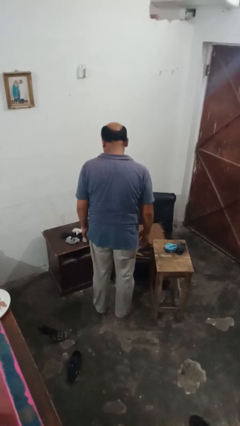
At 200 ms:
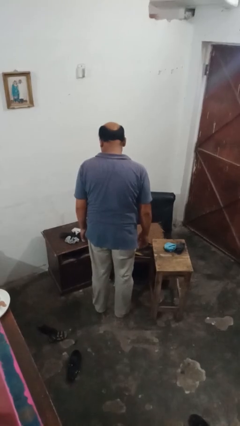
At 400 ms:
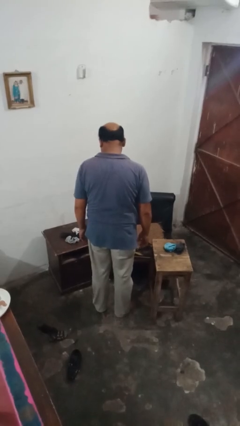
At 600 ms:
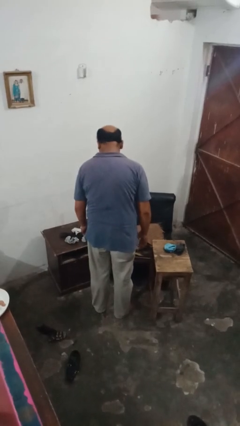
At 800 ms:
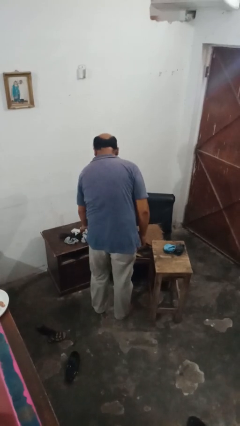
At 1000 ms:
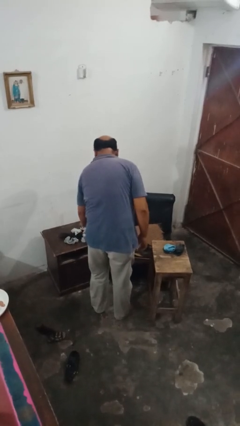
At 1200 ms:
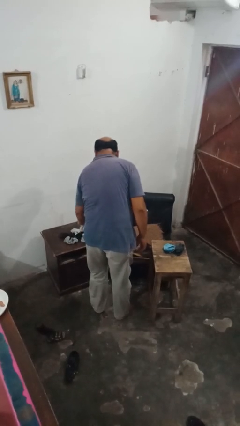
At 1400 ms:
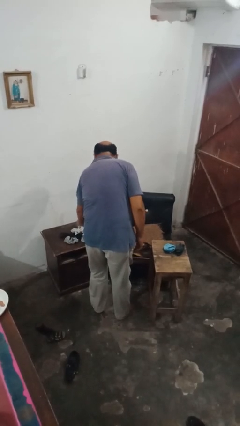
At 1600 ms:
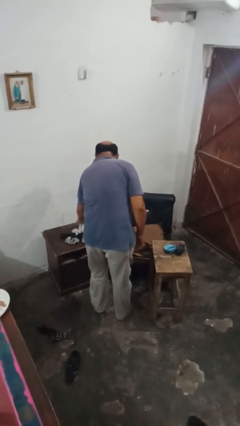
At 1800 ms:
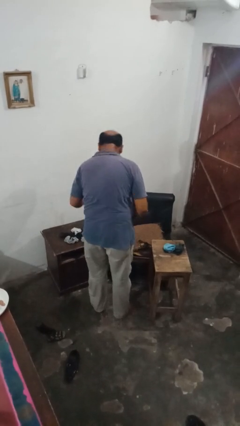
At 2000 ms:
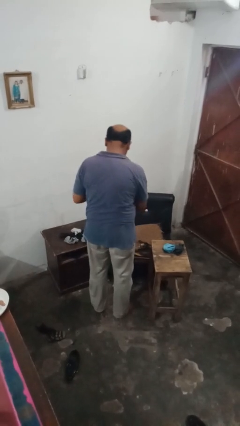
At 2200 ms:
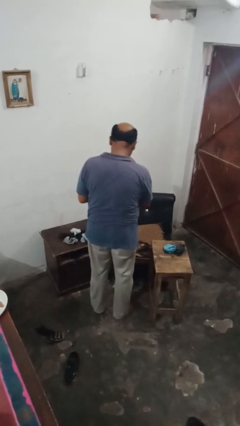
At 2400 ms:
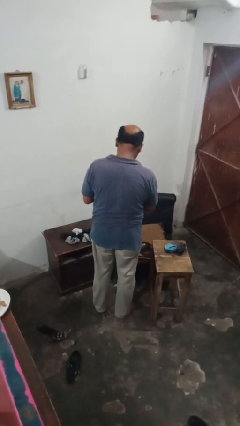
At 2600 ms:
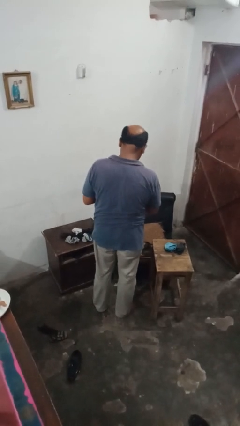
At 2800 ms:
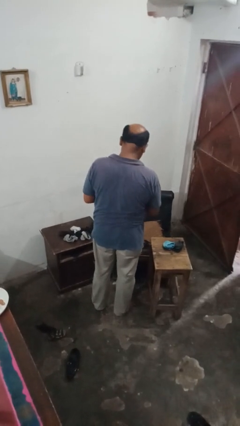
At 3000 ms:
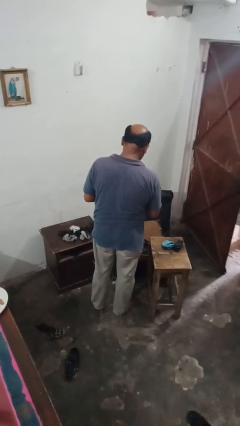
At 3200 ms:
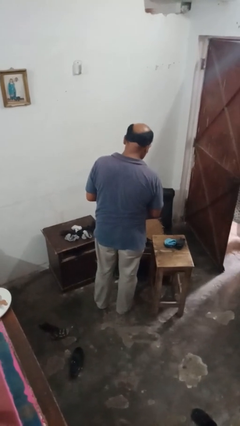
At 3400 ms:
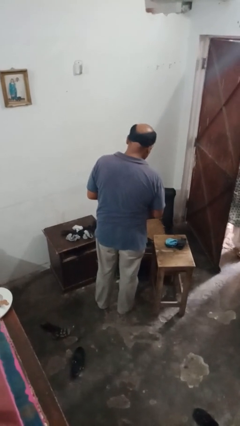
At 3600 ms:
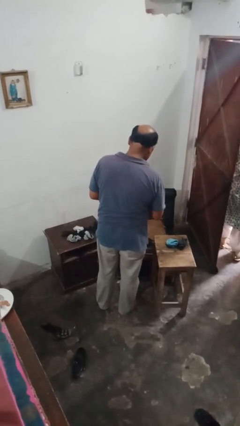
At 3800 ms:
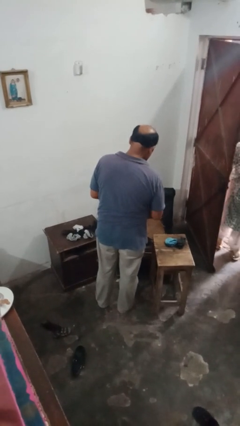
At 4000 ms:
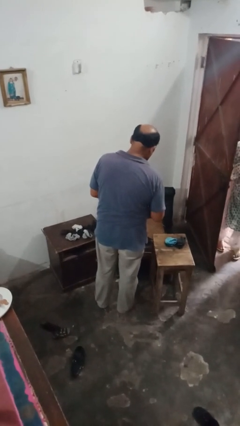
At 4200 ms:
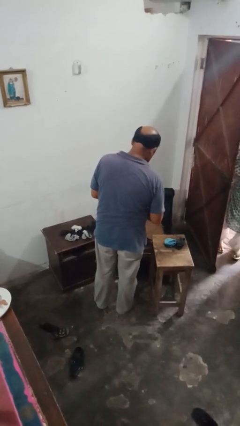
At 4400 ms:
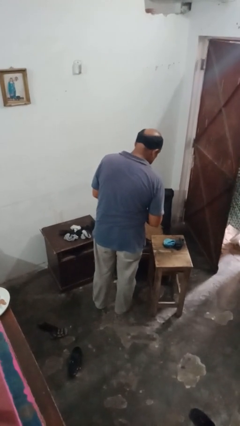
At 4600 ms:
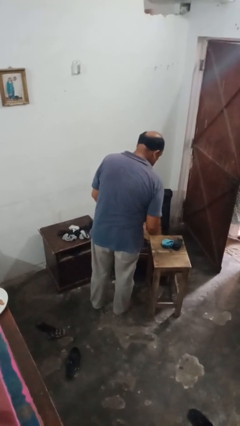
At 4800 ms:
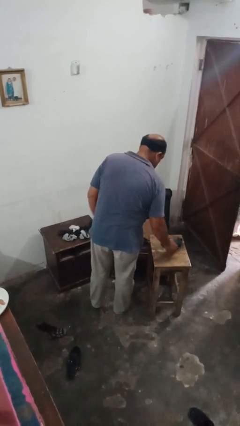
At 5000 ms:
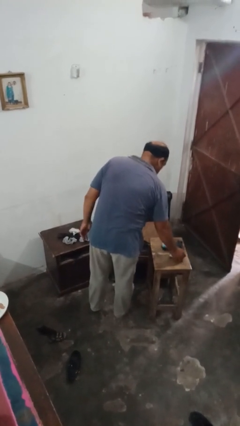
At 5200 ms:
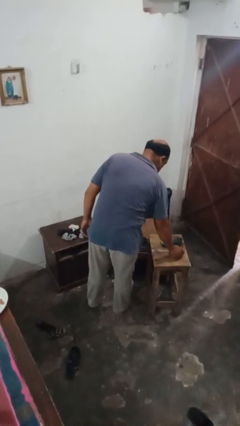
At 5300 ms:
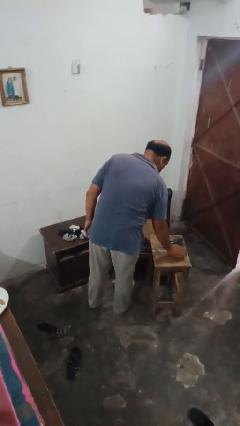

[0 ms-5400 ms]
person folds socks

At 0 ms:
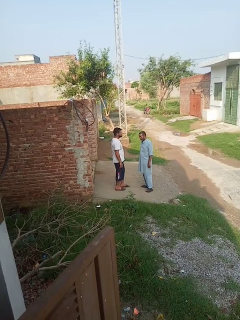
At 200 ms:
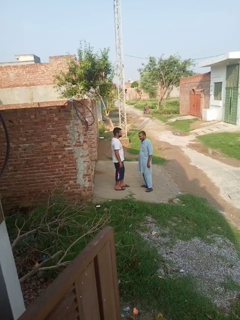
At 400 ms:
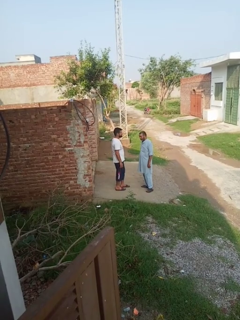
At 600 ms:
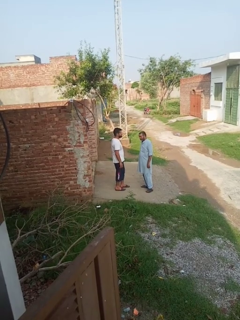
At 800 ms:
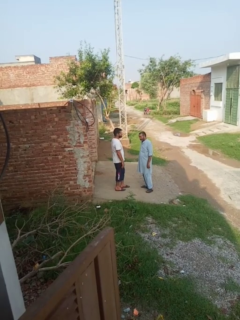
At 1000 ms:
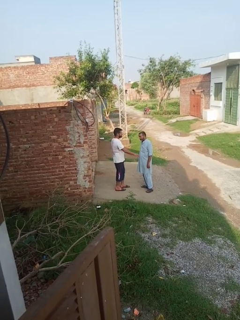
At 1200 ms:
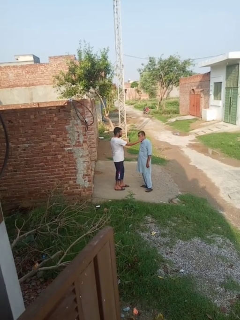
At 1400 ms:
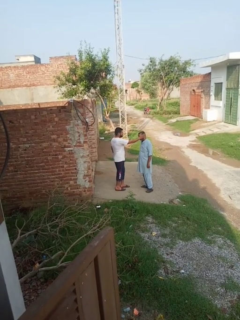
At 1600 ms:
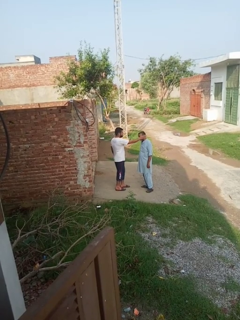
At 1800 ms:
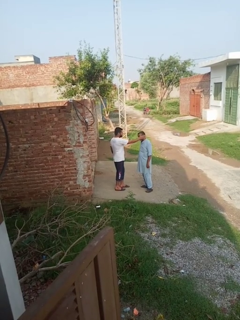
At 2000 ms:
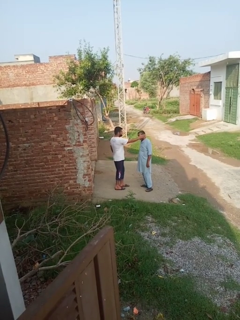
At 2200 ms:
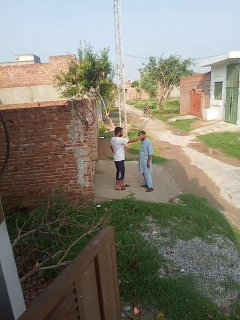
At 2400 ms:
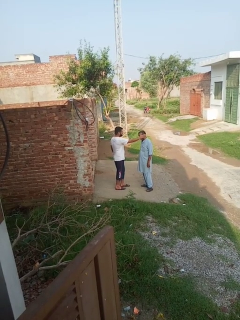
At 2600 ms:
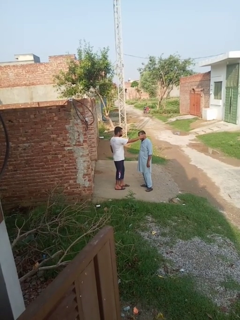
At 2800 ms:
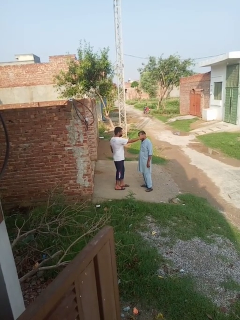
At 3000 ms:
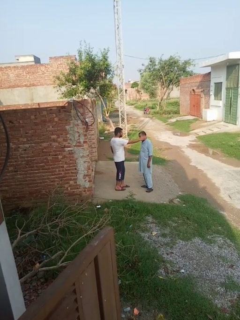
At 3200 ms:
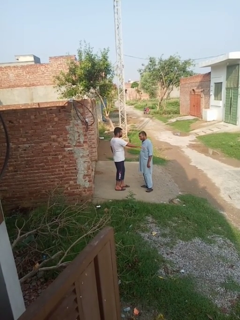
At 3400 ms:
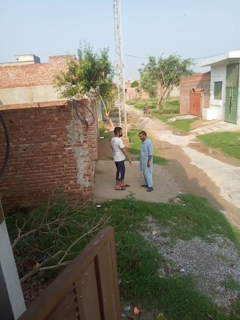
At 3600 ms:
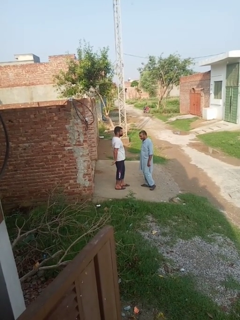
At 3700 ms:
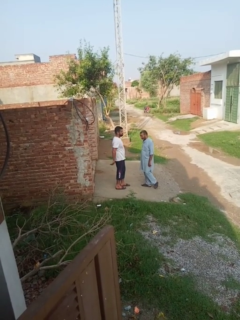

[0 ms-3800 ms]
person touches face of person

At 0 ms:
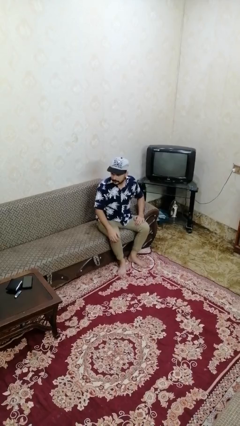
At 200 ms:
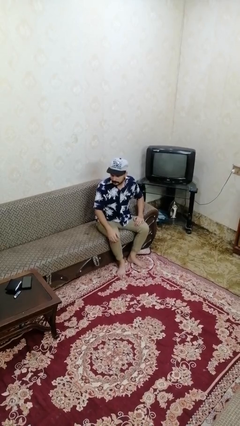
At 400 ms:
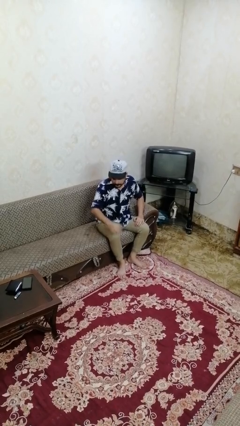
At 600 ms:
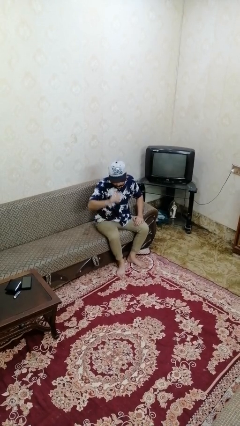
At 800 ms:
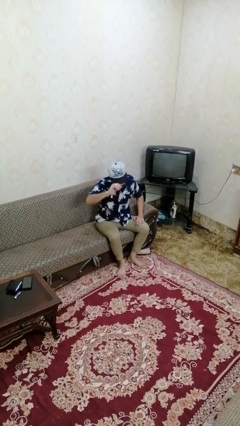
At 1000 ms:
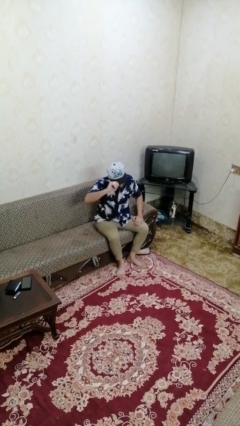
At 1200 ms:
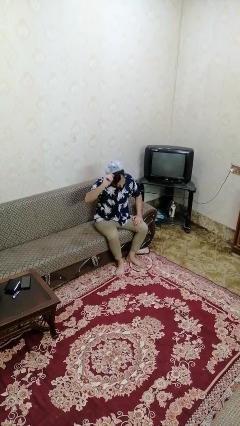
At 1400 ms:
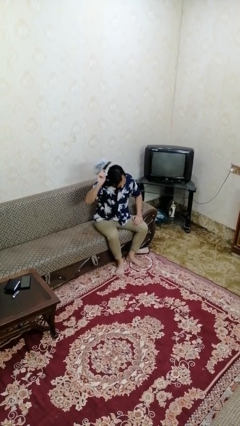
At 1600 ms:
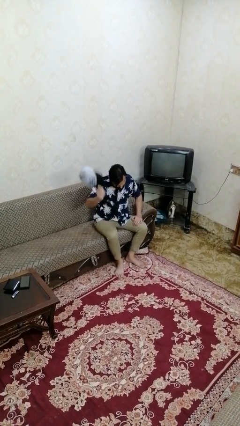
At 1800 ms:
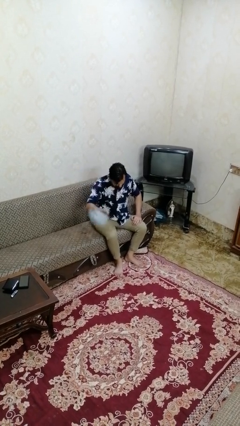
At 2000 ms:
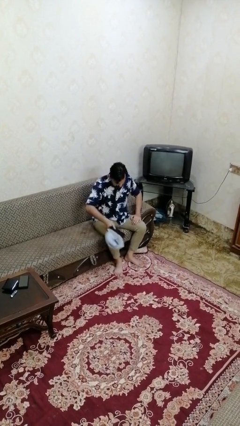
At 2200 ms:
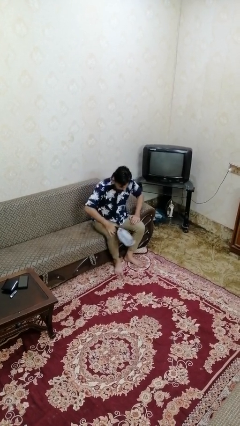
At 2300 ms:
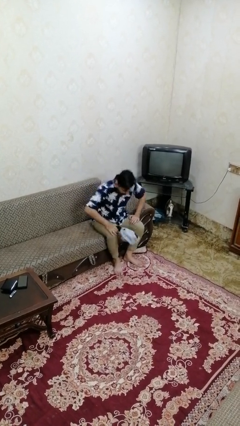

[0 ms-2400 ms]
person takes off hat

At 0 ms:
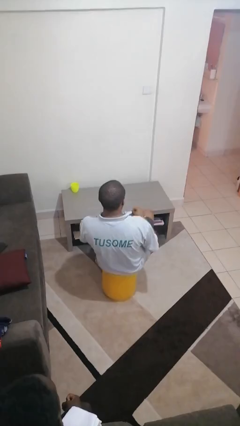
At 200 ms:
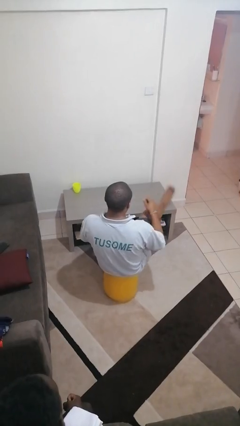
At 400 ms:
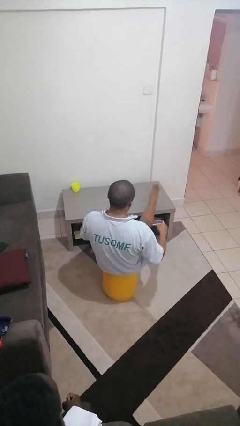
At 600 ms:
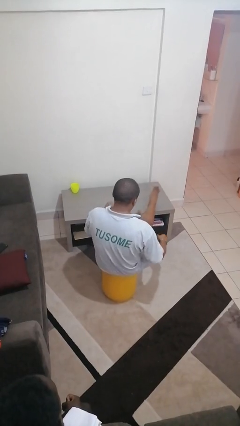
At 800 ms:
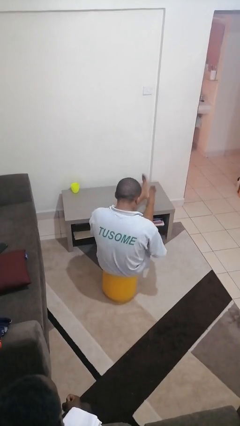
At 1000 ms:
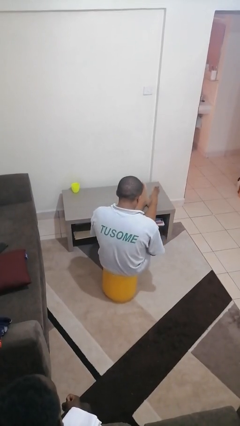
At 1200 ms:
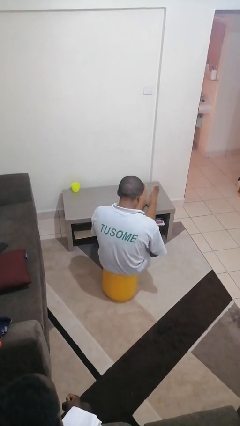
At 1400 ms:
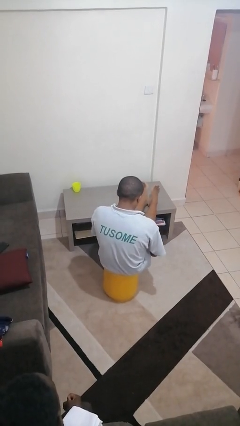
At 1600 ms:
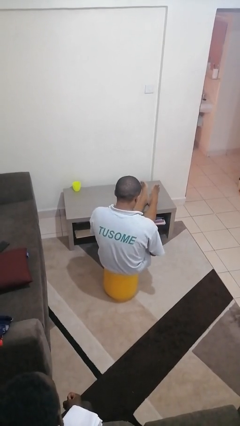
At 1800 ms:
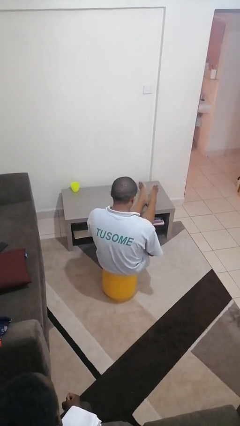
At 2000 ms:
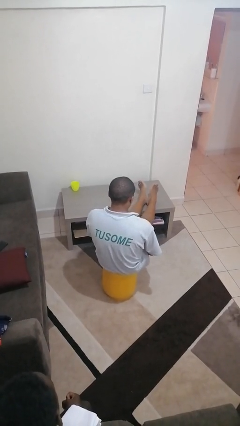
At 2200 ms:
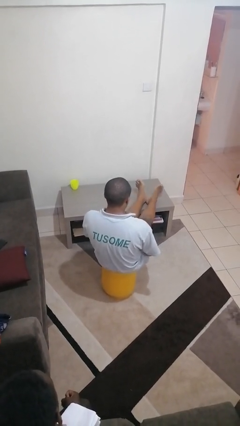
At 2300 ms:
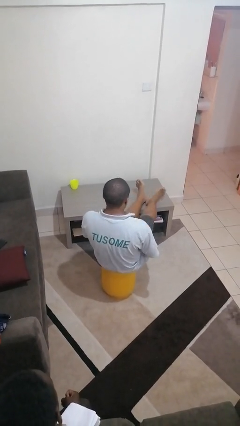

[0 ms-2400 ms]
person puts feet up

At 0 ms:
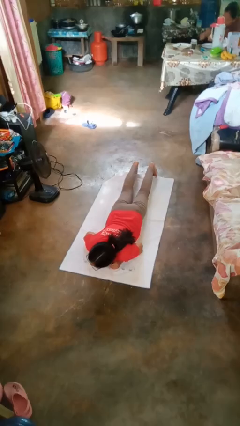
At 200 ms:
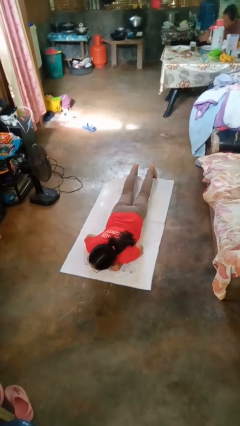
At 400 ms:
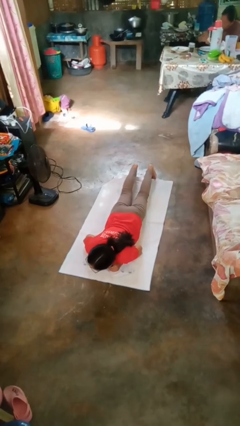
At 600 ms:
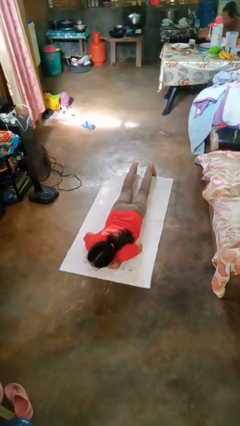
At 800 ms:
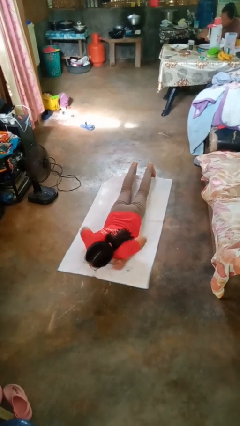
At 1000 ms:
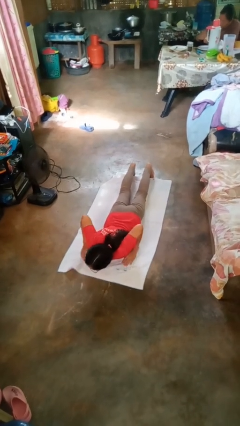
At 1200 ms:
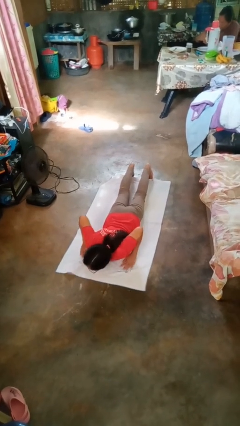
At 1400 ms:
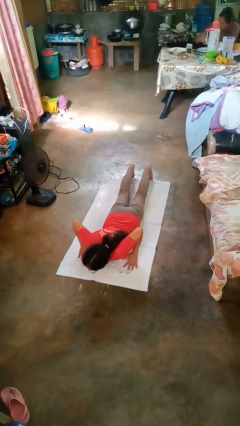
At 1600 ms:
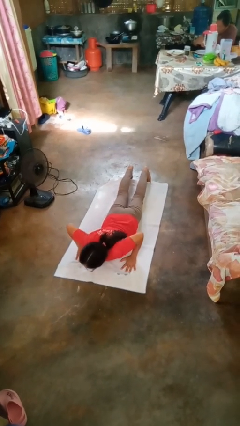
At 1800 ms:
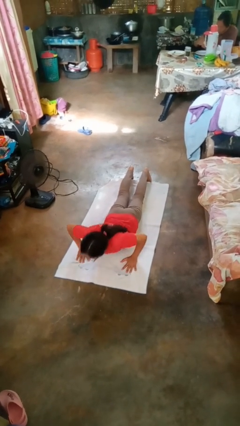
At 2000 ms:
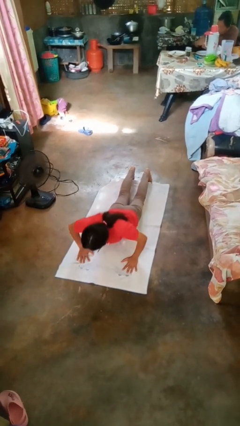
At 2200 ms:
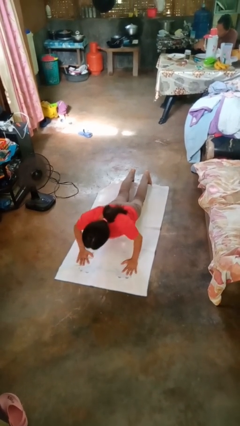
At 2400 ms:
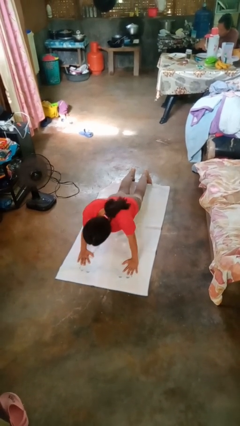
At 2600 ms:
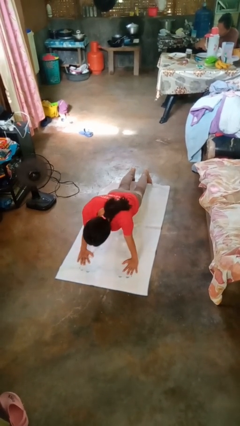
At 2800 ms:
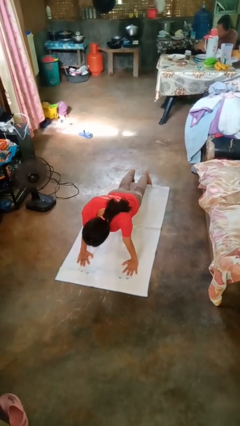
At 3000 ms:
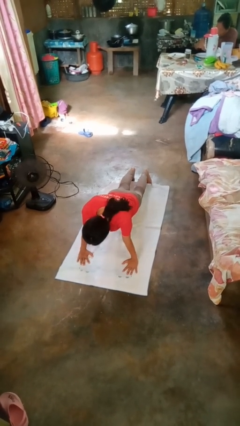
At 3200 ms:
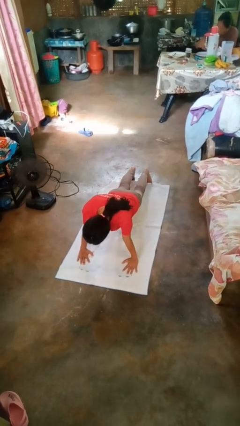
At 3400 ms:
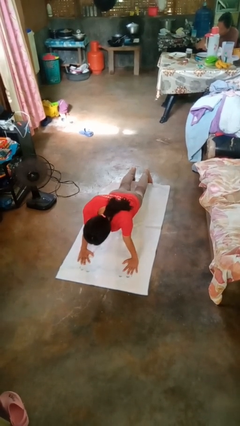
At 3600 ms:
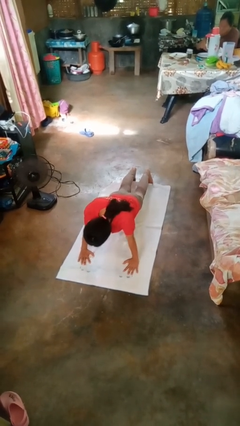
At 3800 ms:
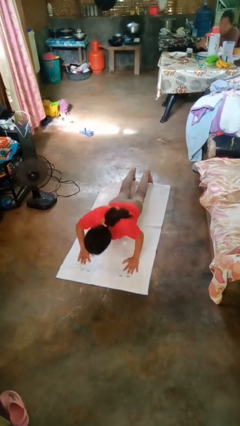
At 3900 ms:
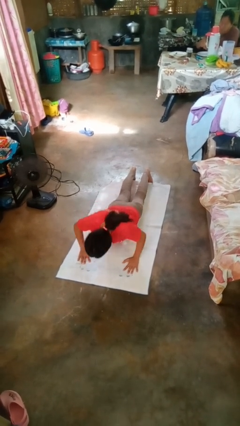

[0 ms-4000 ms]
person exercises with pushup

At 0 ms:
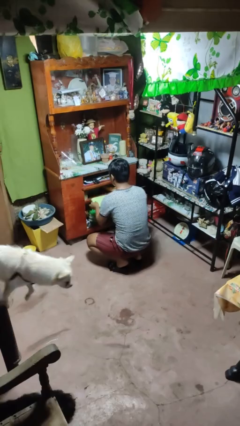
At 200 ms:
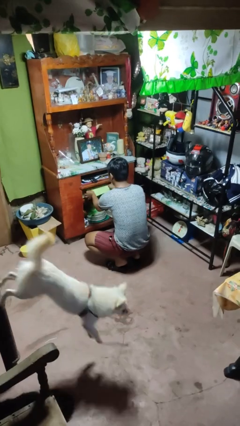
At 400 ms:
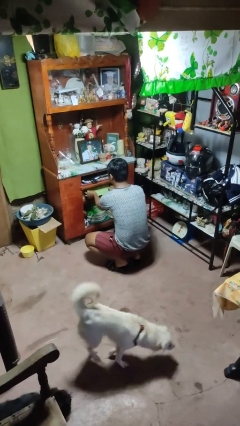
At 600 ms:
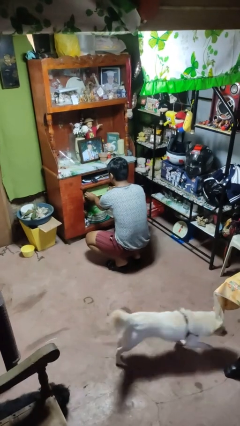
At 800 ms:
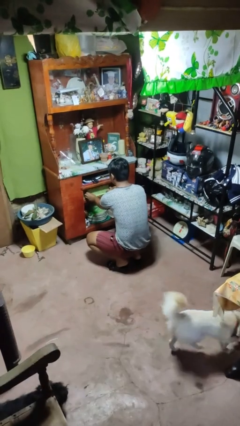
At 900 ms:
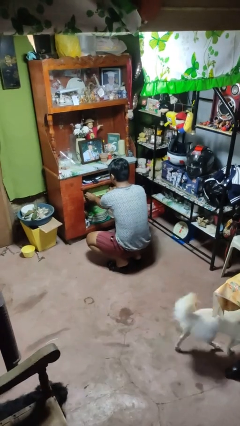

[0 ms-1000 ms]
person puts down object into cabinet
